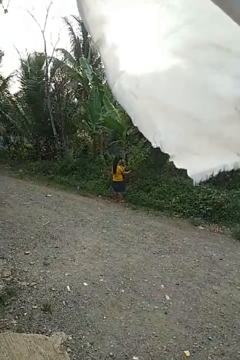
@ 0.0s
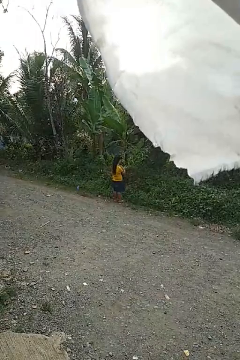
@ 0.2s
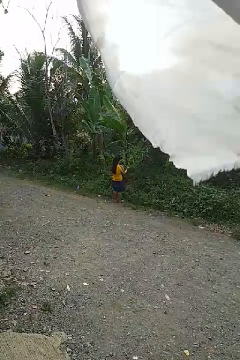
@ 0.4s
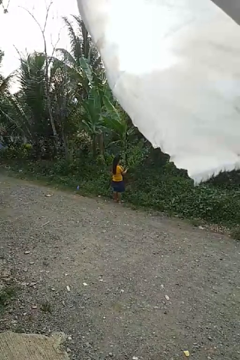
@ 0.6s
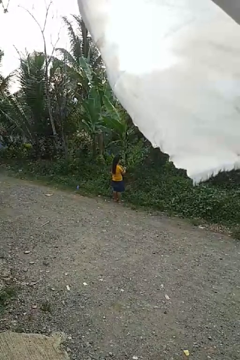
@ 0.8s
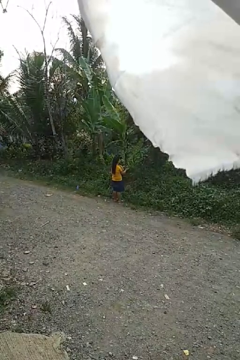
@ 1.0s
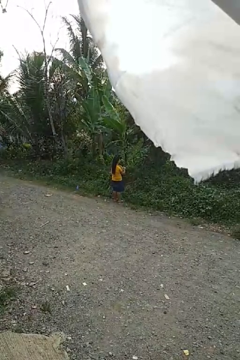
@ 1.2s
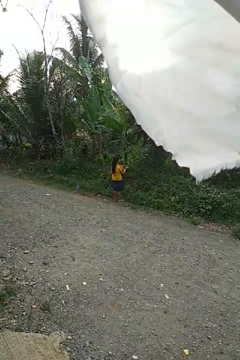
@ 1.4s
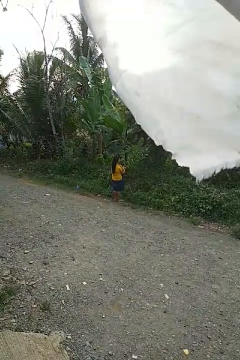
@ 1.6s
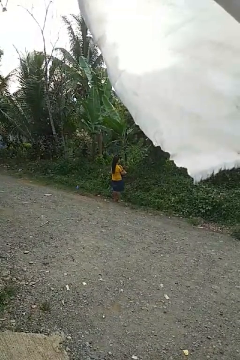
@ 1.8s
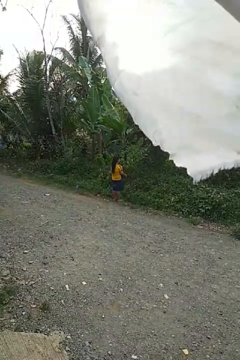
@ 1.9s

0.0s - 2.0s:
person claps hands

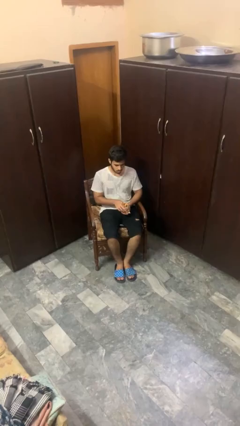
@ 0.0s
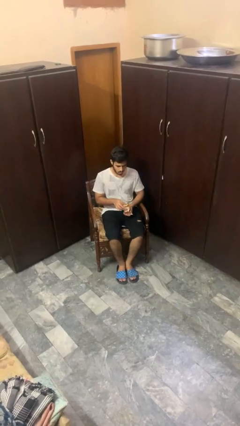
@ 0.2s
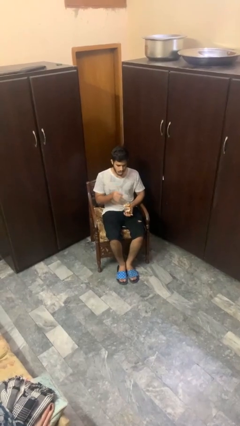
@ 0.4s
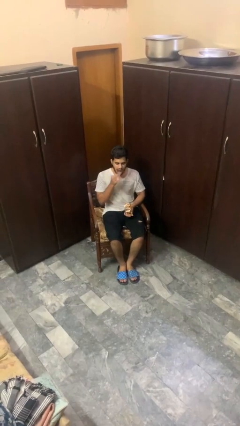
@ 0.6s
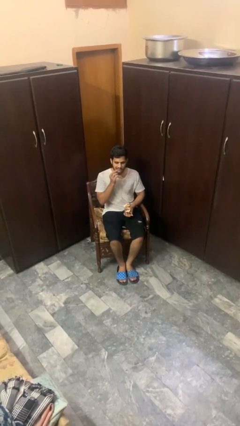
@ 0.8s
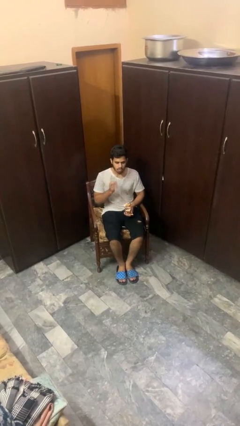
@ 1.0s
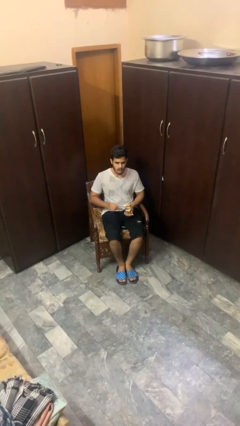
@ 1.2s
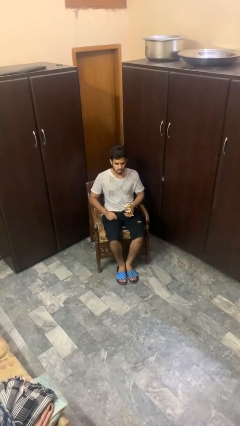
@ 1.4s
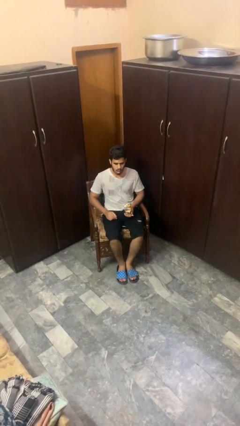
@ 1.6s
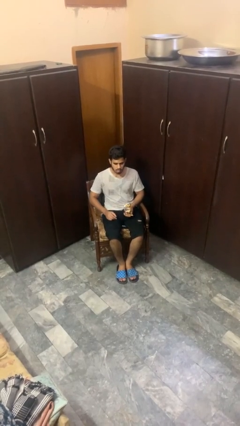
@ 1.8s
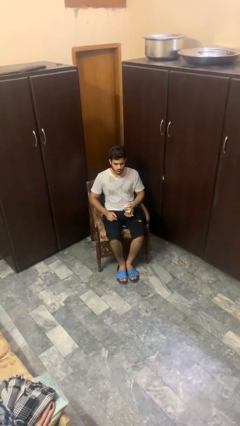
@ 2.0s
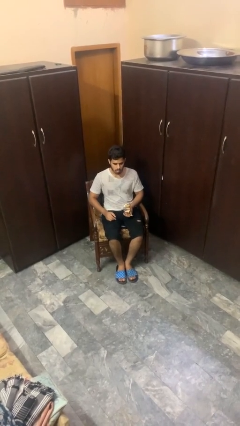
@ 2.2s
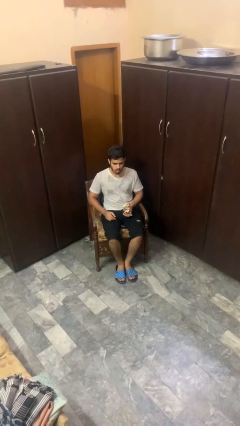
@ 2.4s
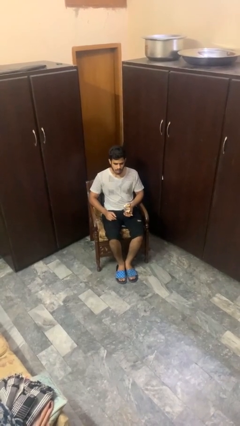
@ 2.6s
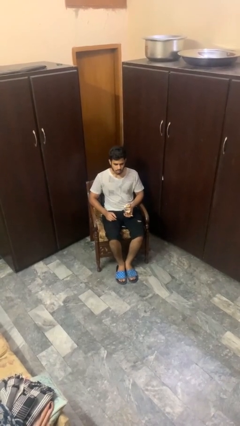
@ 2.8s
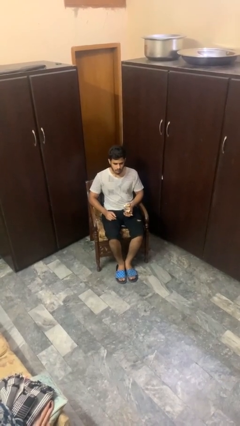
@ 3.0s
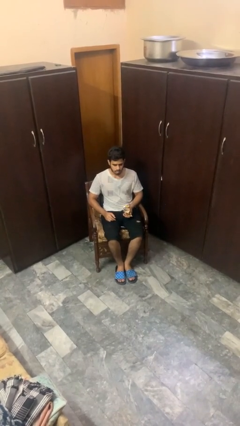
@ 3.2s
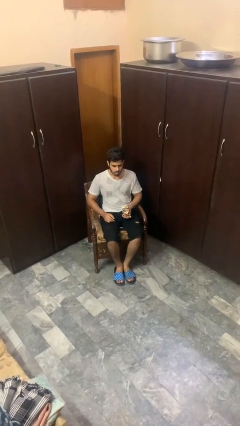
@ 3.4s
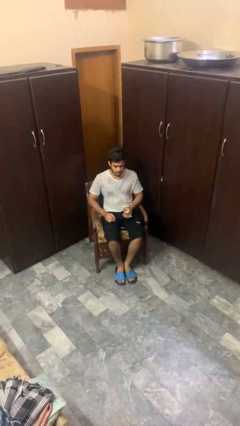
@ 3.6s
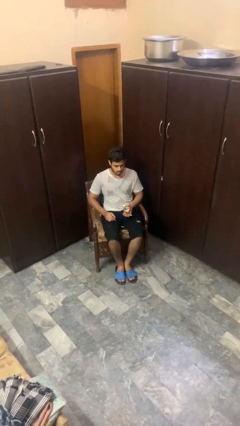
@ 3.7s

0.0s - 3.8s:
person eats snack from bag

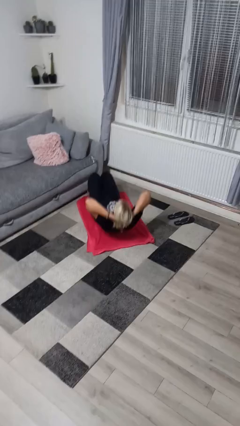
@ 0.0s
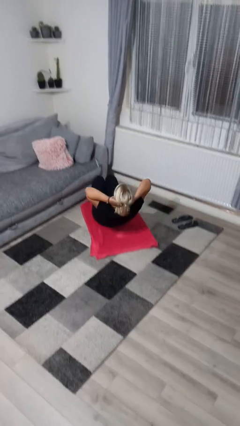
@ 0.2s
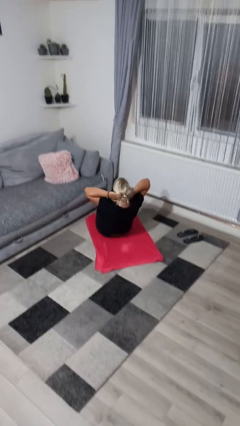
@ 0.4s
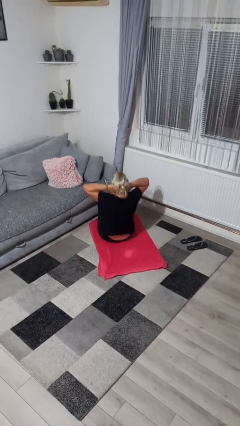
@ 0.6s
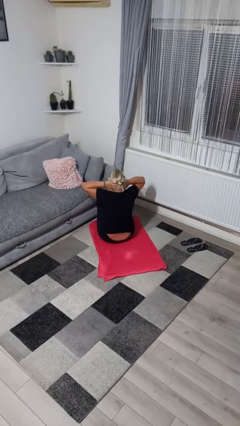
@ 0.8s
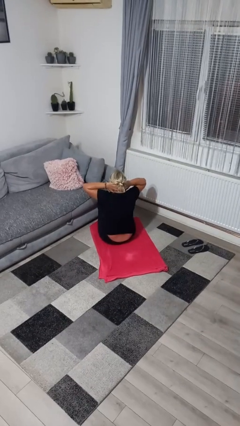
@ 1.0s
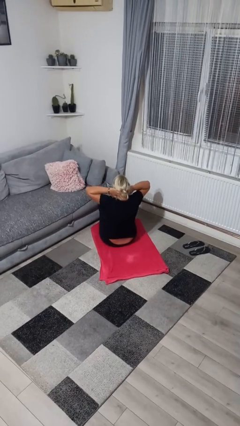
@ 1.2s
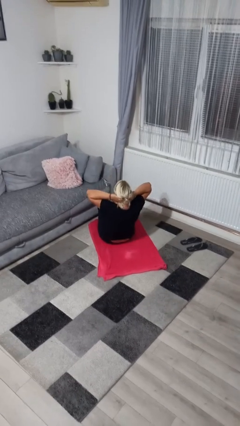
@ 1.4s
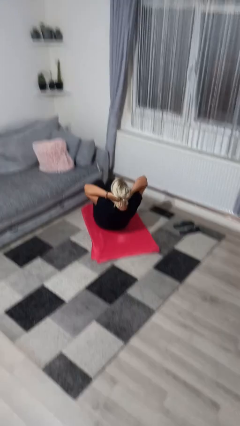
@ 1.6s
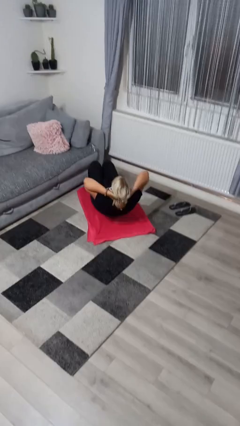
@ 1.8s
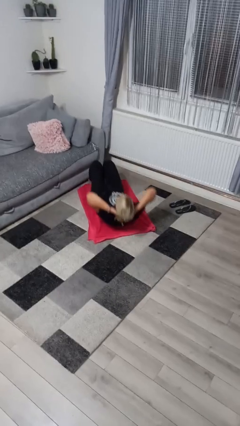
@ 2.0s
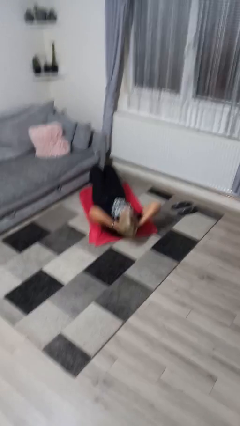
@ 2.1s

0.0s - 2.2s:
person exercises with situp

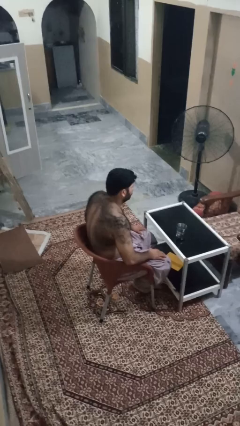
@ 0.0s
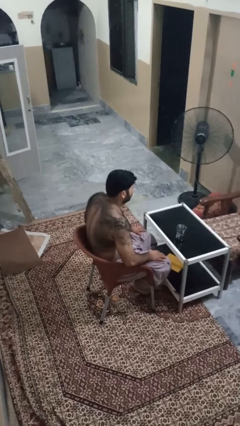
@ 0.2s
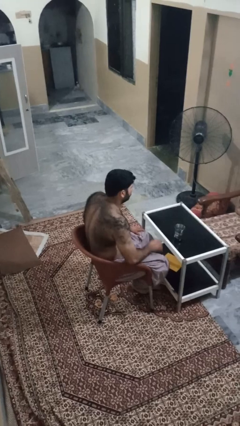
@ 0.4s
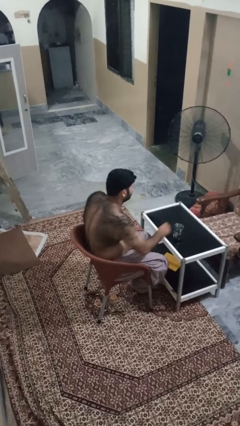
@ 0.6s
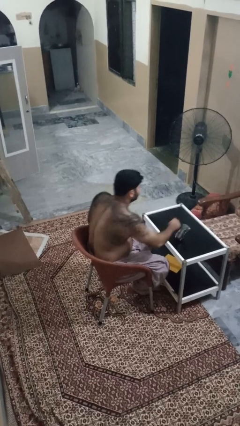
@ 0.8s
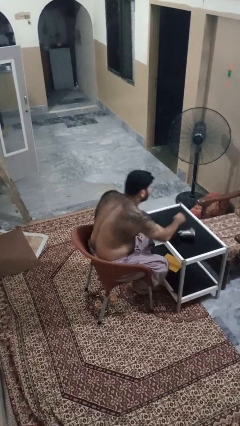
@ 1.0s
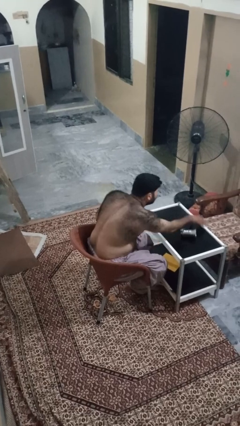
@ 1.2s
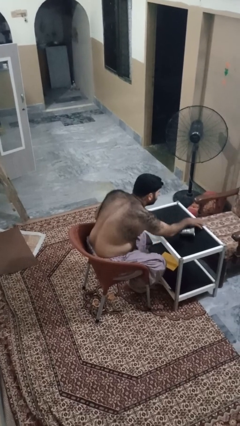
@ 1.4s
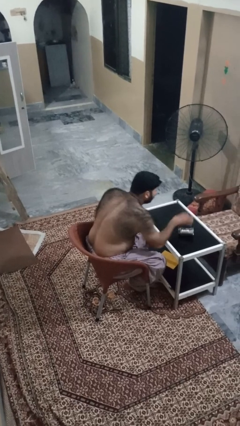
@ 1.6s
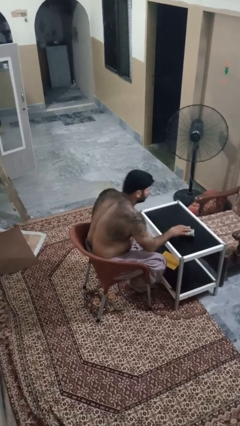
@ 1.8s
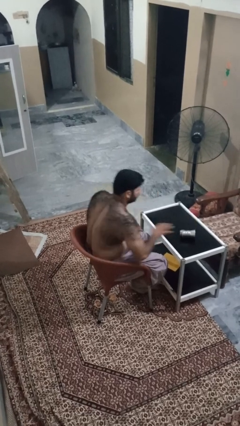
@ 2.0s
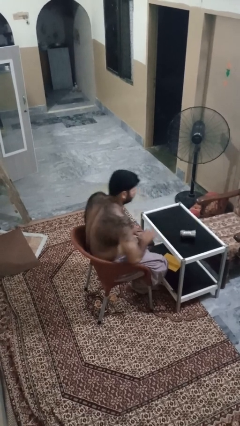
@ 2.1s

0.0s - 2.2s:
person knocks over glass

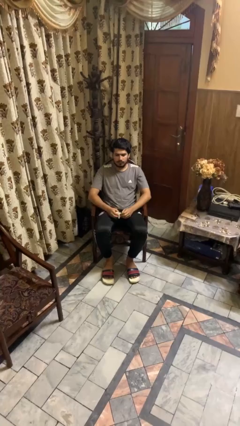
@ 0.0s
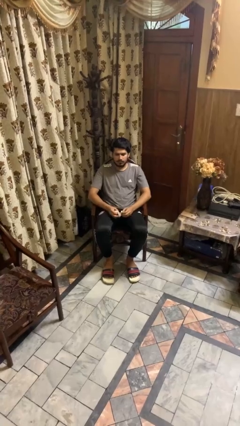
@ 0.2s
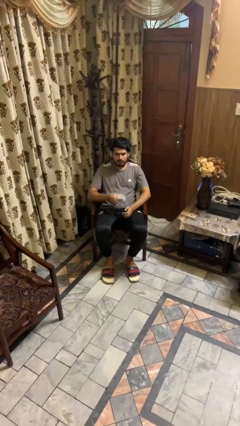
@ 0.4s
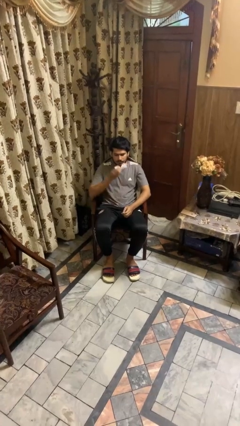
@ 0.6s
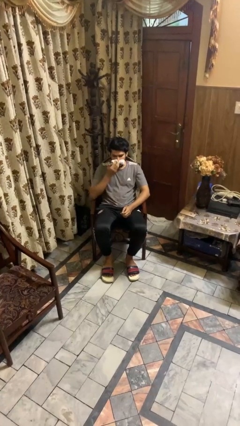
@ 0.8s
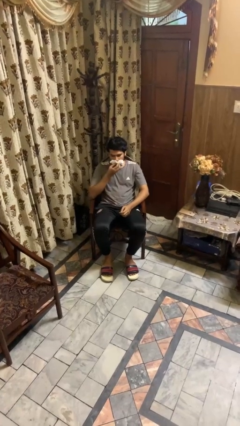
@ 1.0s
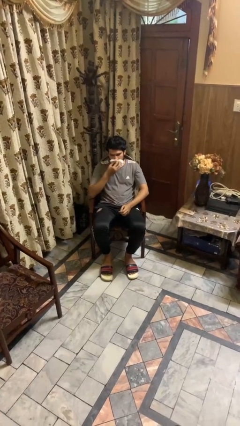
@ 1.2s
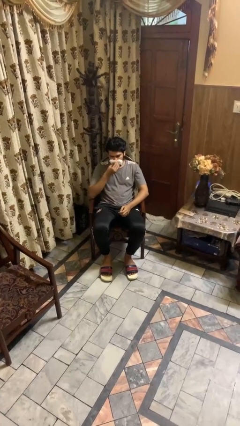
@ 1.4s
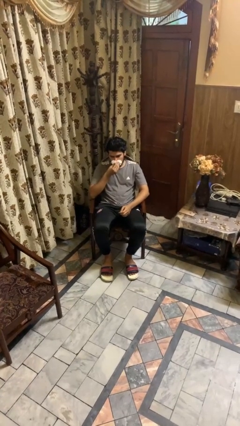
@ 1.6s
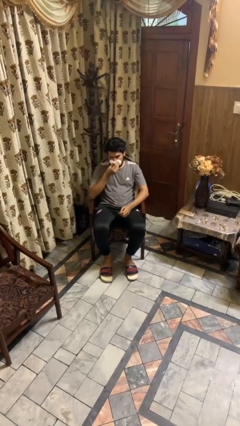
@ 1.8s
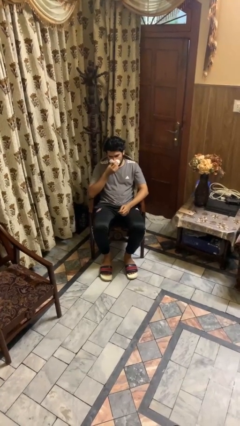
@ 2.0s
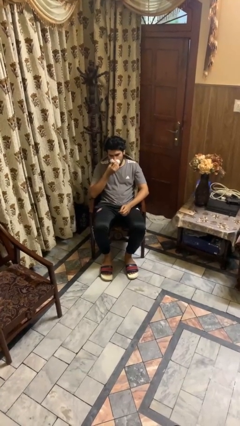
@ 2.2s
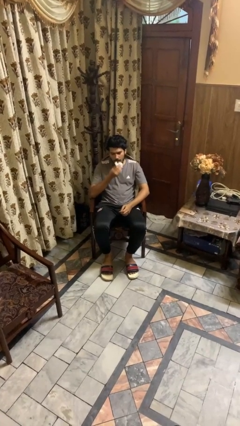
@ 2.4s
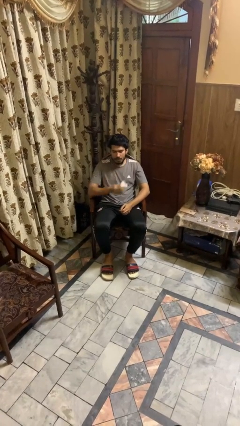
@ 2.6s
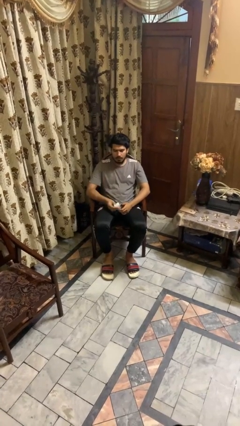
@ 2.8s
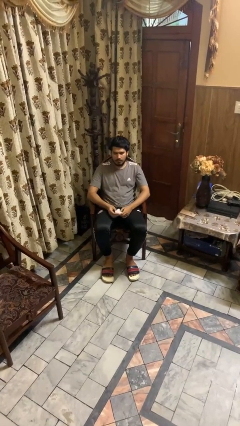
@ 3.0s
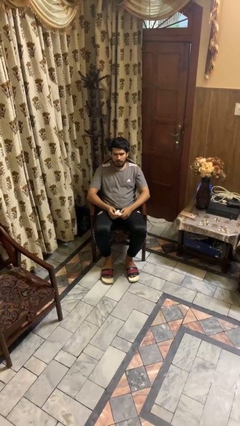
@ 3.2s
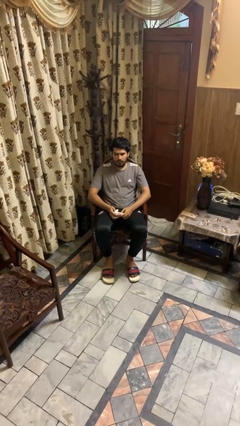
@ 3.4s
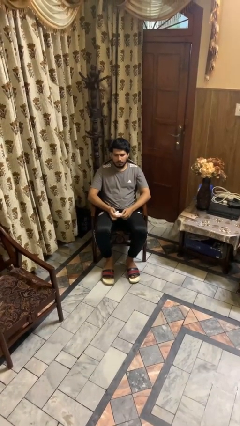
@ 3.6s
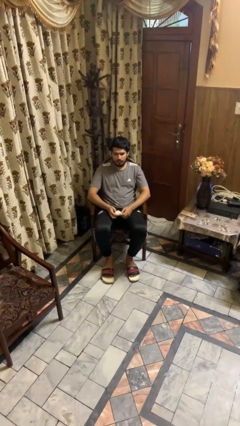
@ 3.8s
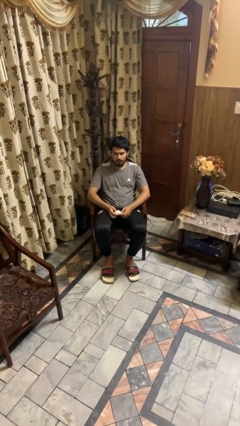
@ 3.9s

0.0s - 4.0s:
person blows nose

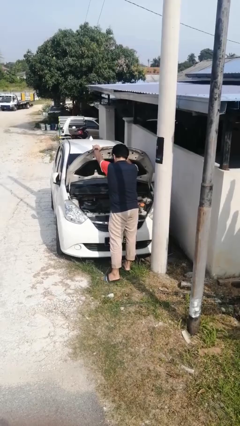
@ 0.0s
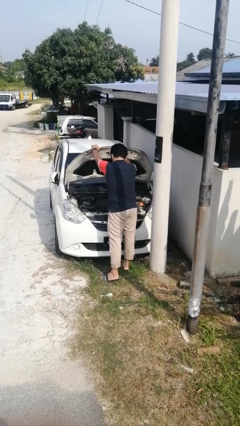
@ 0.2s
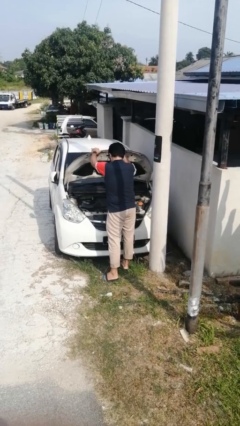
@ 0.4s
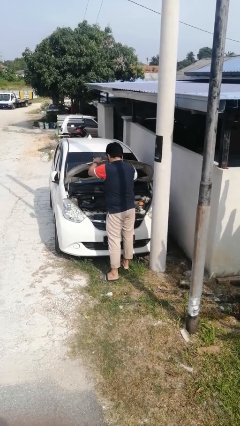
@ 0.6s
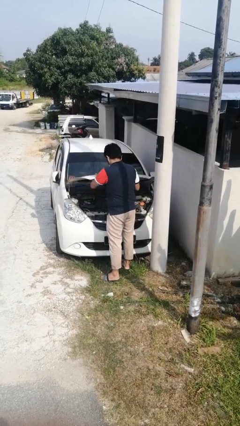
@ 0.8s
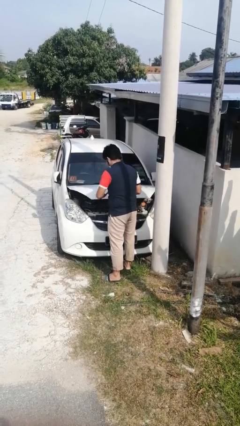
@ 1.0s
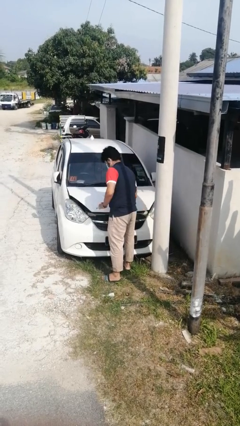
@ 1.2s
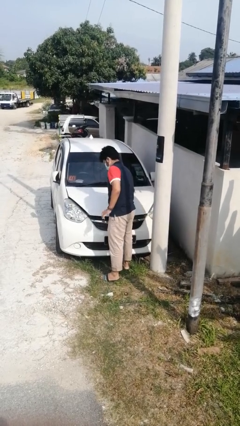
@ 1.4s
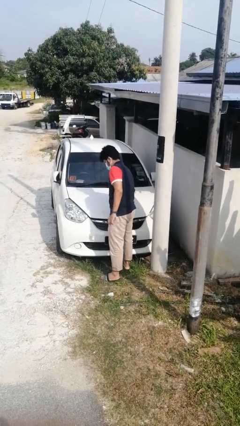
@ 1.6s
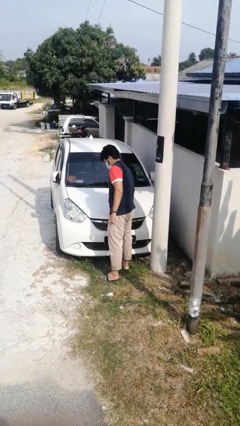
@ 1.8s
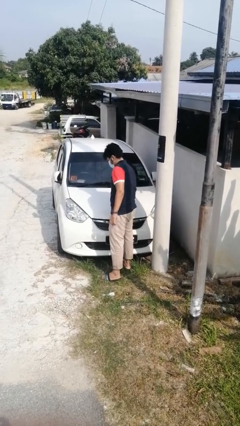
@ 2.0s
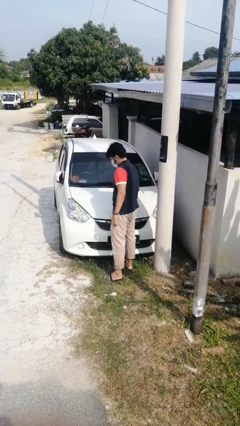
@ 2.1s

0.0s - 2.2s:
person closes car hood

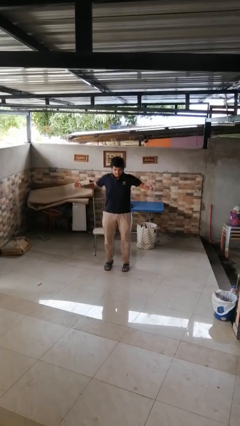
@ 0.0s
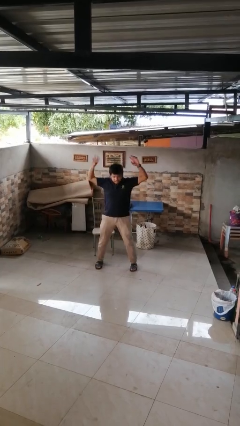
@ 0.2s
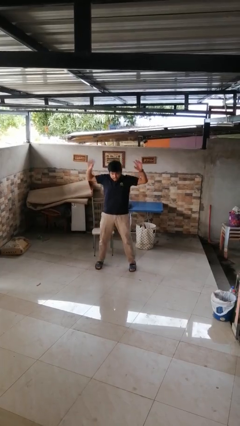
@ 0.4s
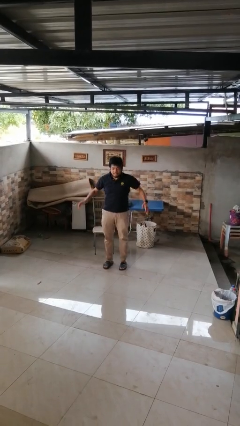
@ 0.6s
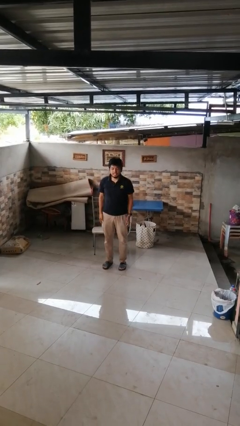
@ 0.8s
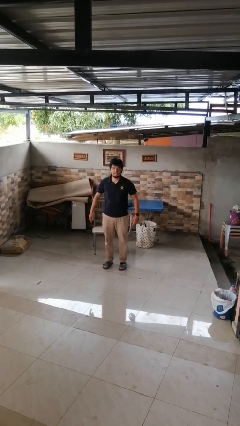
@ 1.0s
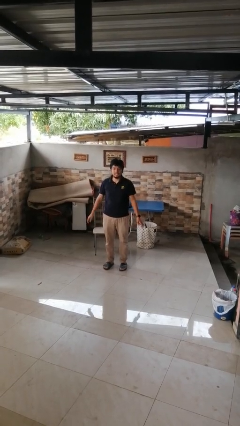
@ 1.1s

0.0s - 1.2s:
person exercises with jumping jacks
